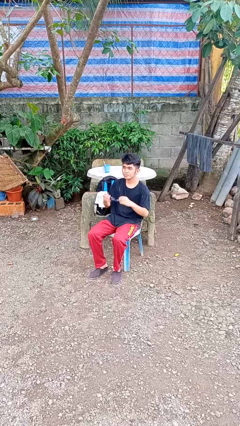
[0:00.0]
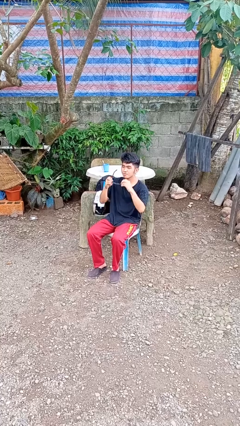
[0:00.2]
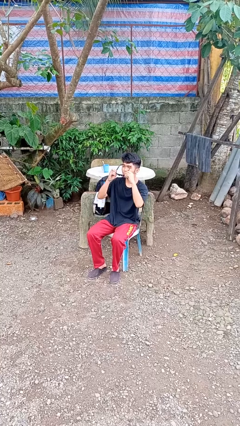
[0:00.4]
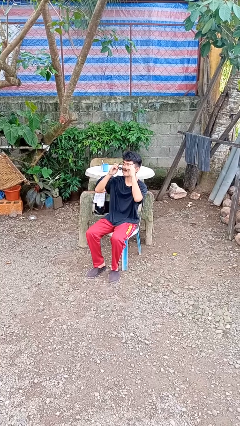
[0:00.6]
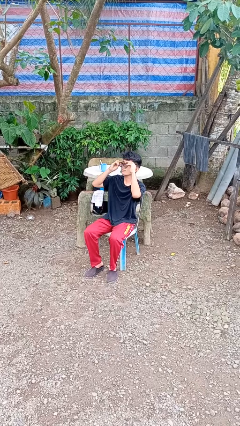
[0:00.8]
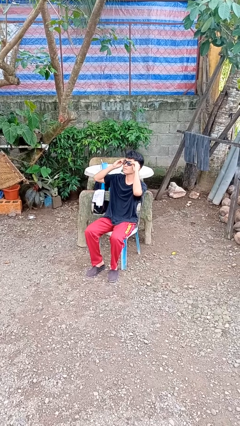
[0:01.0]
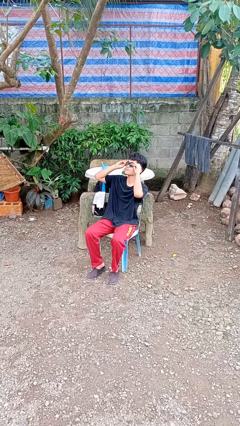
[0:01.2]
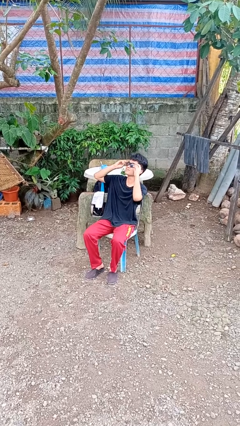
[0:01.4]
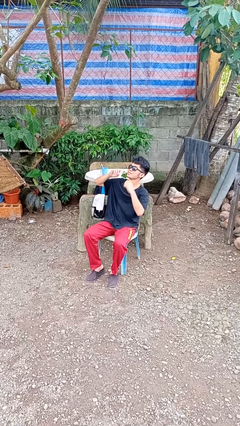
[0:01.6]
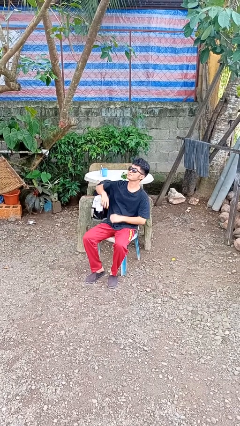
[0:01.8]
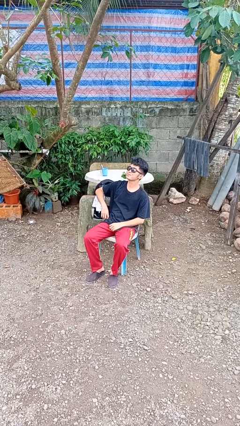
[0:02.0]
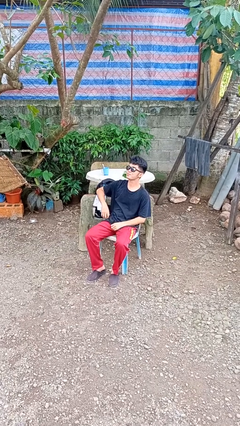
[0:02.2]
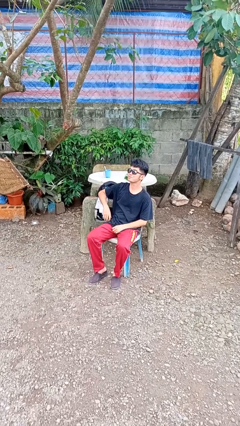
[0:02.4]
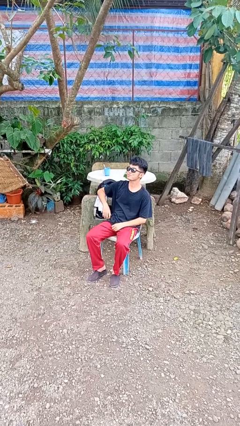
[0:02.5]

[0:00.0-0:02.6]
person puts on sunglasses

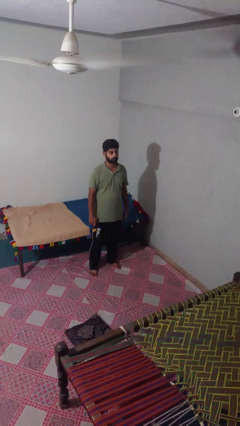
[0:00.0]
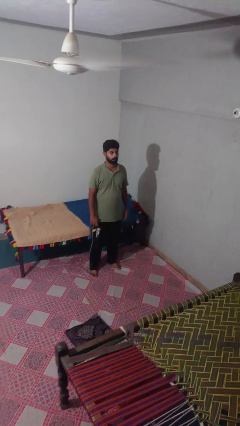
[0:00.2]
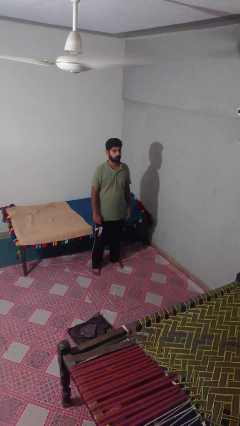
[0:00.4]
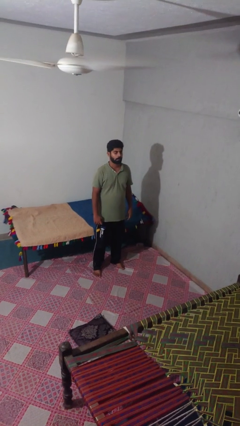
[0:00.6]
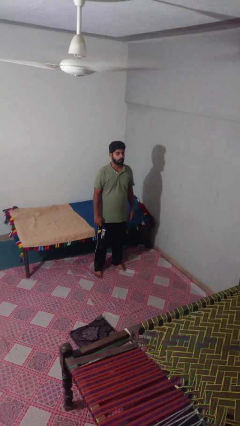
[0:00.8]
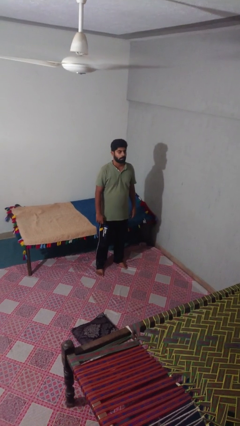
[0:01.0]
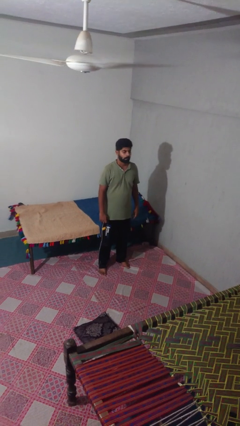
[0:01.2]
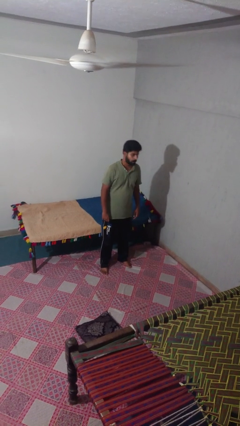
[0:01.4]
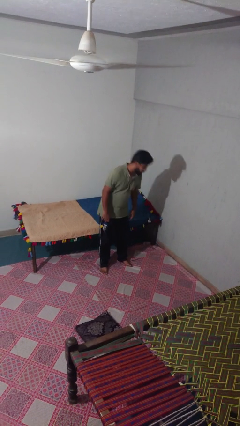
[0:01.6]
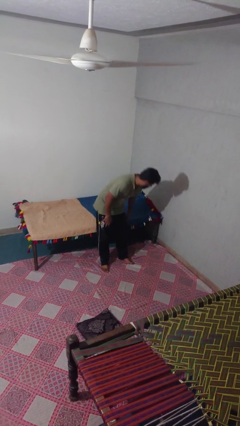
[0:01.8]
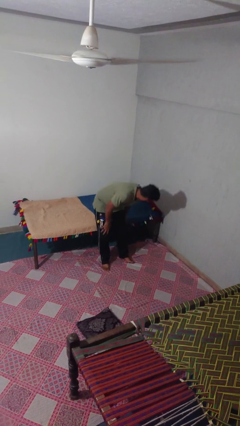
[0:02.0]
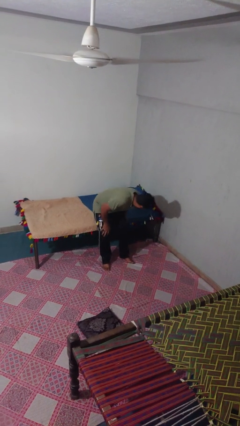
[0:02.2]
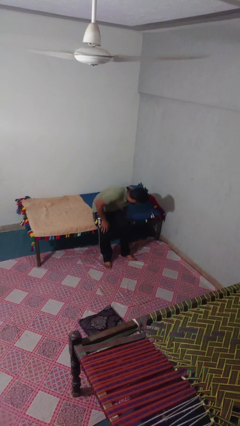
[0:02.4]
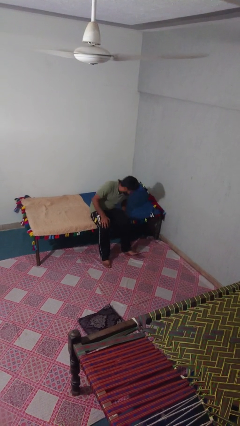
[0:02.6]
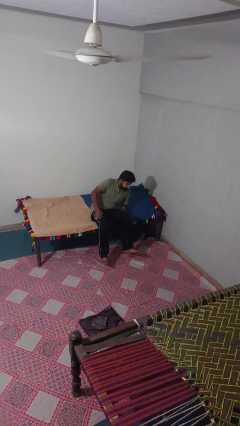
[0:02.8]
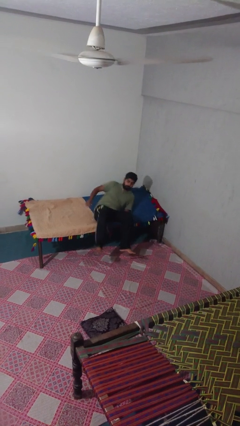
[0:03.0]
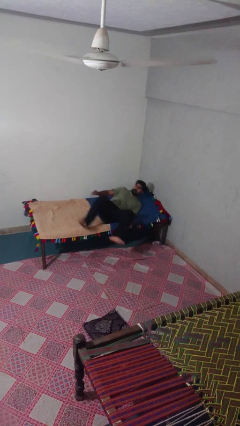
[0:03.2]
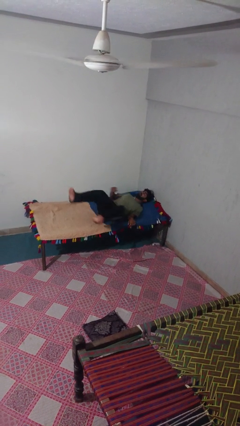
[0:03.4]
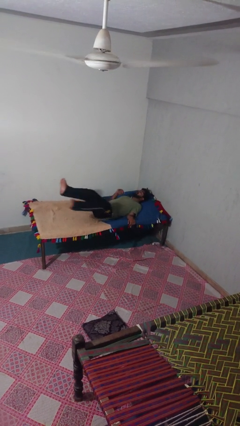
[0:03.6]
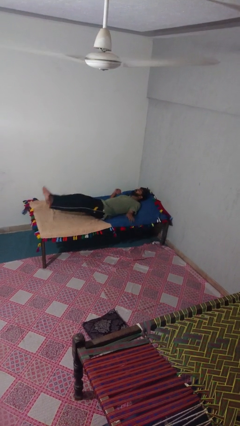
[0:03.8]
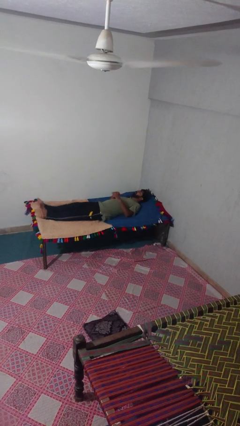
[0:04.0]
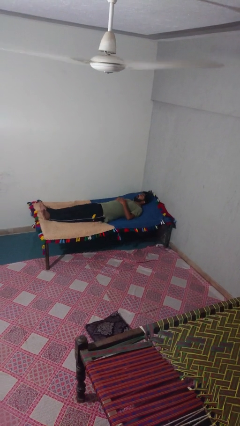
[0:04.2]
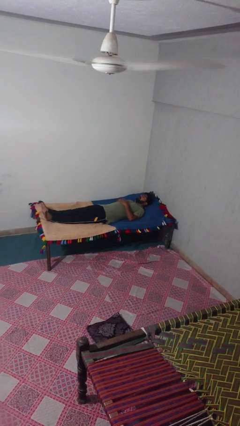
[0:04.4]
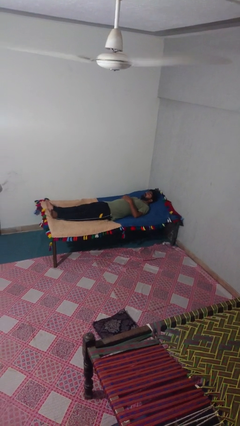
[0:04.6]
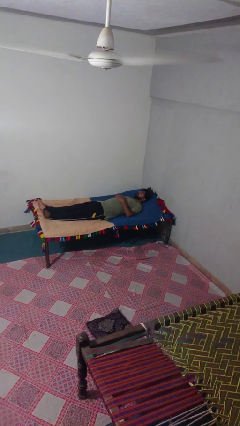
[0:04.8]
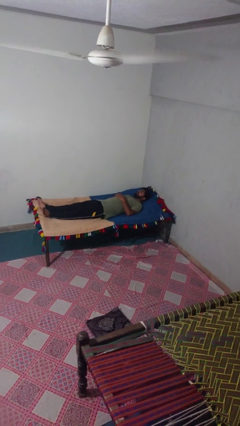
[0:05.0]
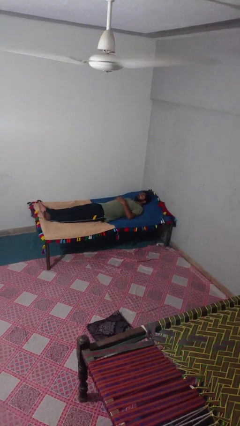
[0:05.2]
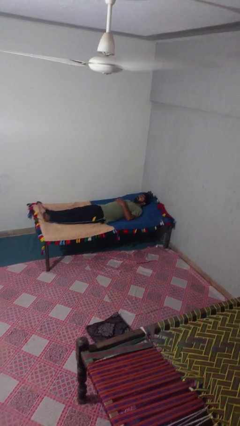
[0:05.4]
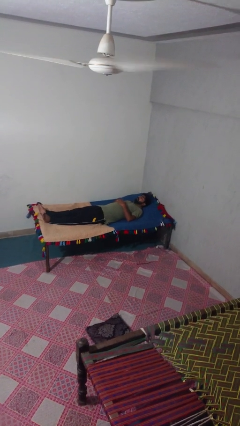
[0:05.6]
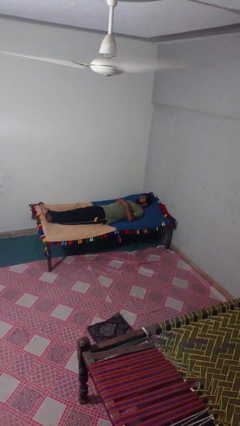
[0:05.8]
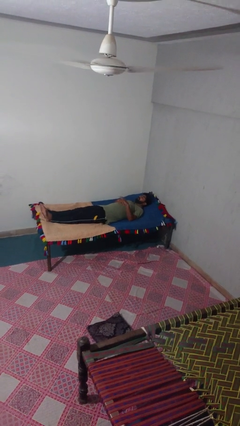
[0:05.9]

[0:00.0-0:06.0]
person lies down on bed

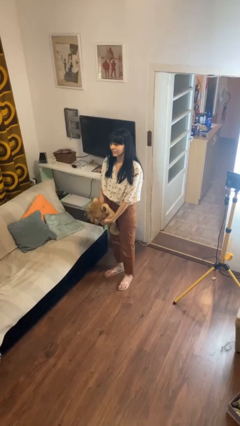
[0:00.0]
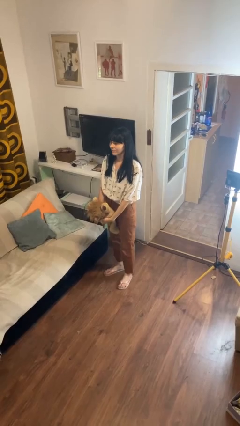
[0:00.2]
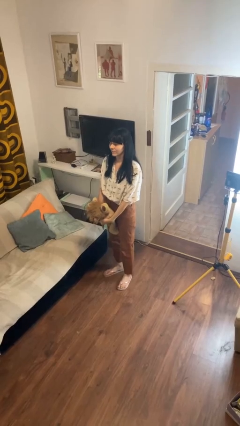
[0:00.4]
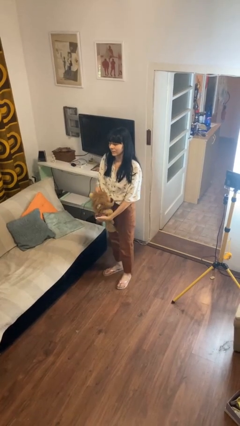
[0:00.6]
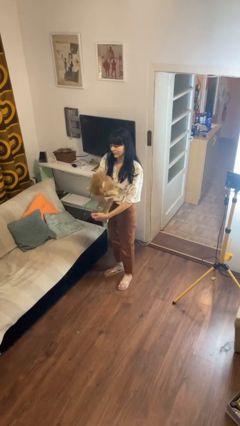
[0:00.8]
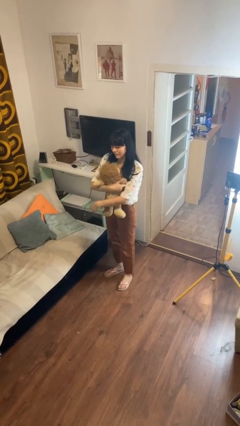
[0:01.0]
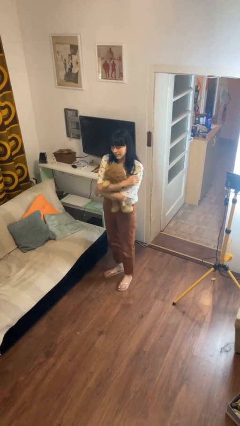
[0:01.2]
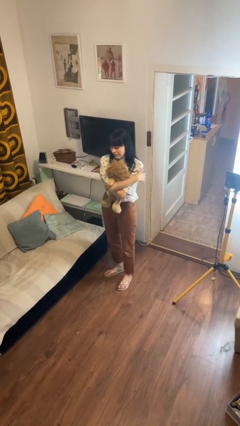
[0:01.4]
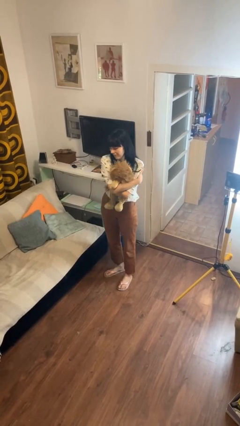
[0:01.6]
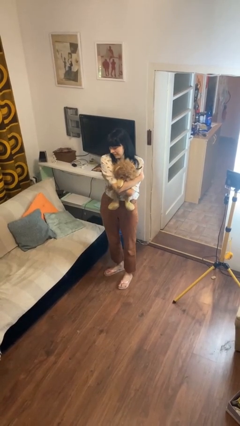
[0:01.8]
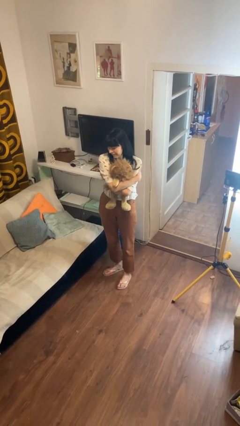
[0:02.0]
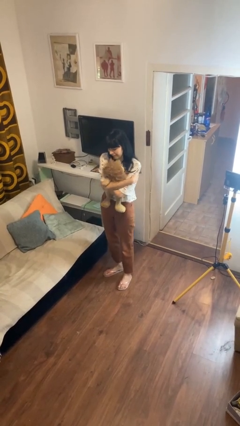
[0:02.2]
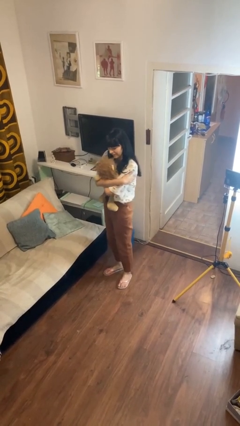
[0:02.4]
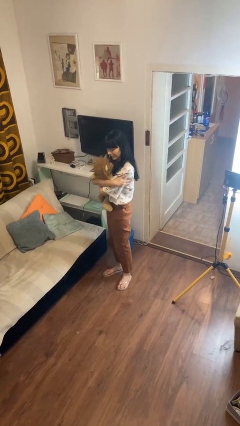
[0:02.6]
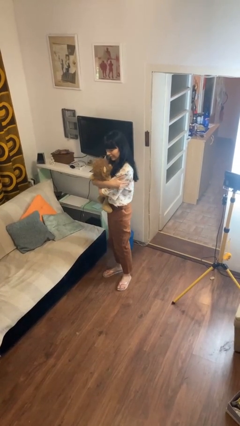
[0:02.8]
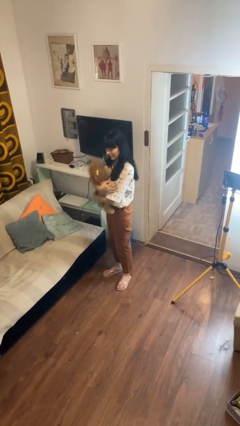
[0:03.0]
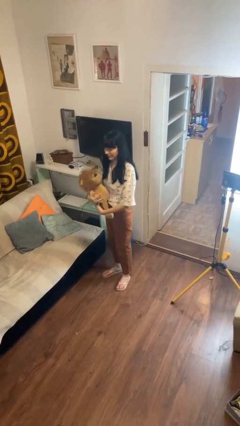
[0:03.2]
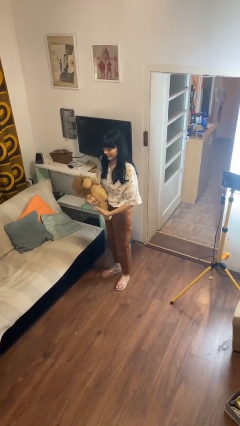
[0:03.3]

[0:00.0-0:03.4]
person hugs stuffed animal

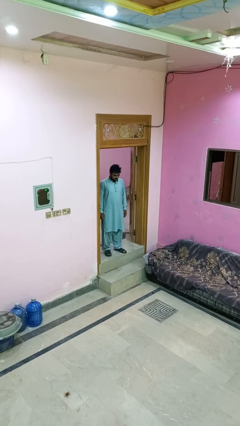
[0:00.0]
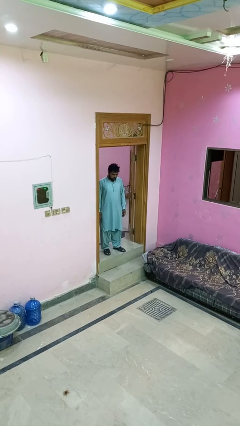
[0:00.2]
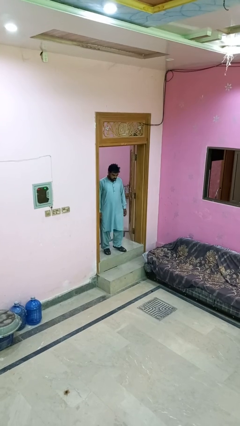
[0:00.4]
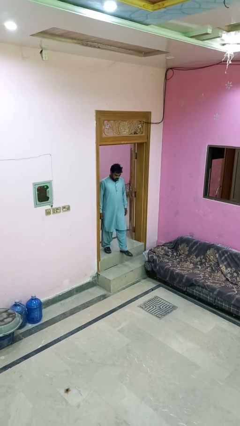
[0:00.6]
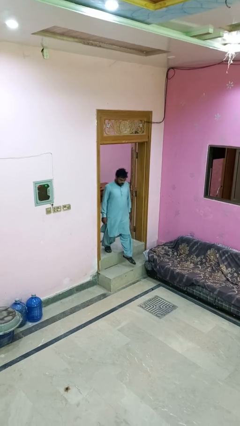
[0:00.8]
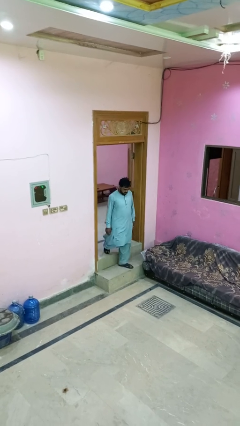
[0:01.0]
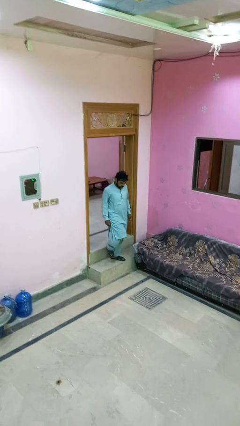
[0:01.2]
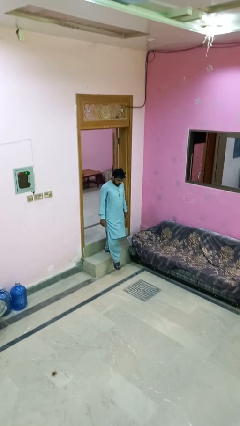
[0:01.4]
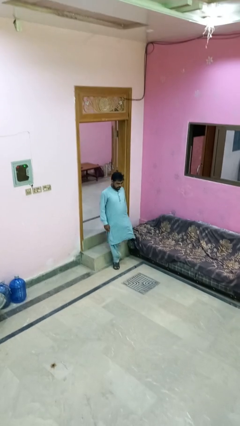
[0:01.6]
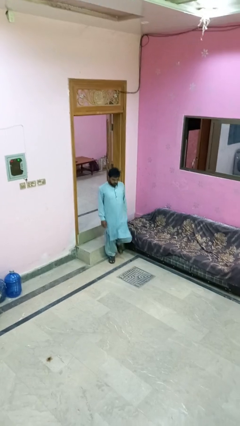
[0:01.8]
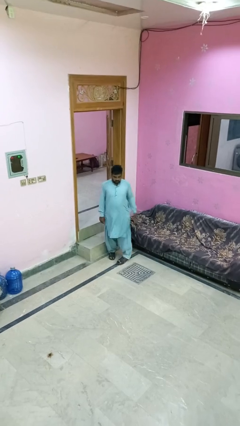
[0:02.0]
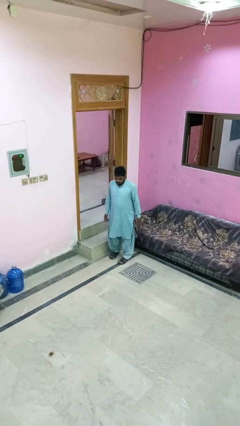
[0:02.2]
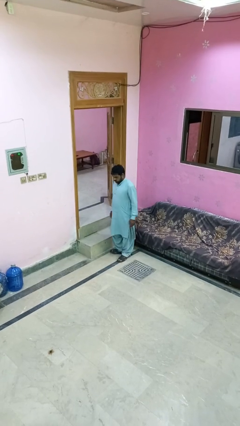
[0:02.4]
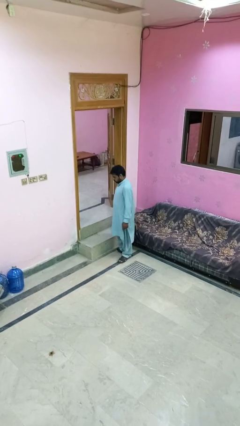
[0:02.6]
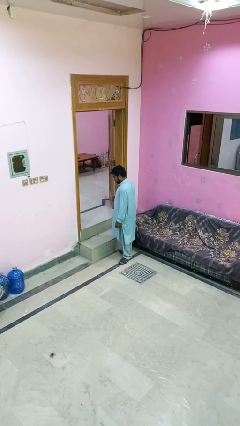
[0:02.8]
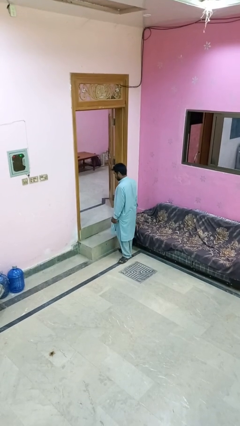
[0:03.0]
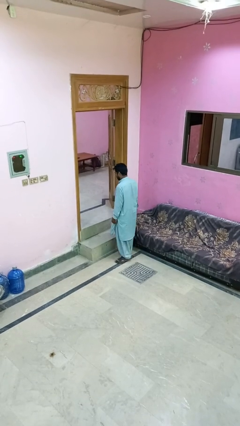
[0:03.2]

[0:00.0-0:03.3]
person climbs down stairs

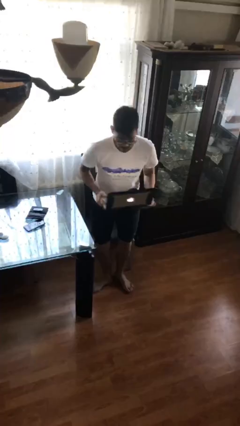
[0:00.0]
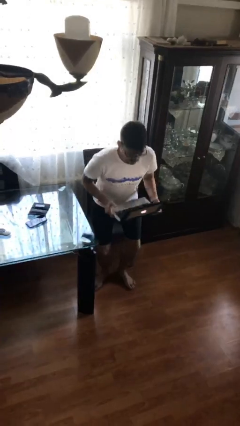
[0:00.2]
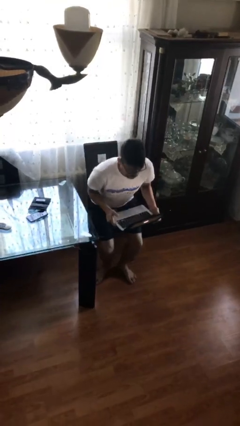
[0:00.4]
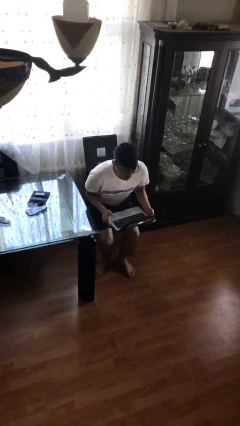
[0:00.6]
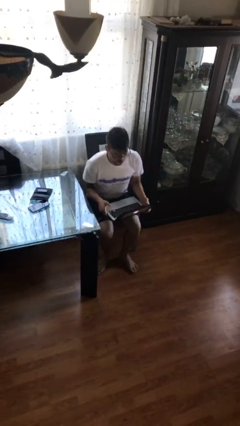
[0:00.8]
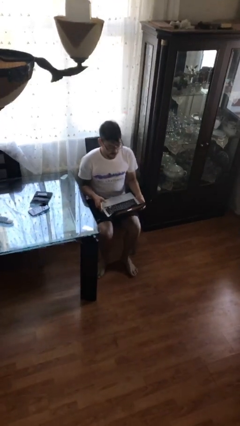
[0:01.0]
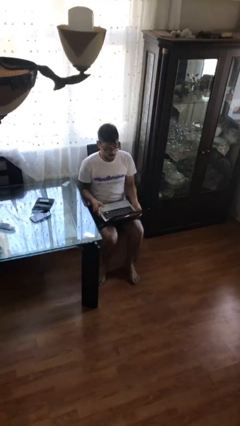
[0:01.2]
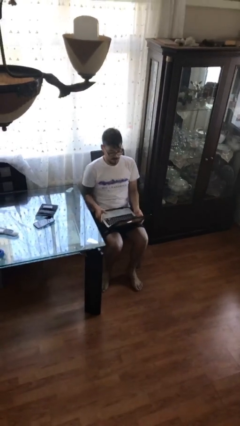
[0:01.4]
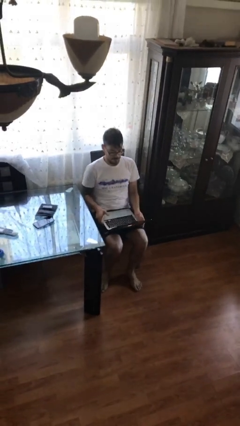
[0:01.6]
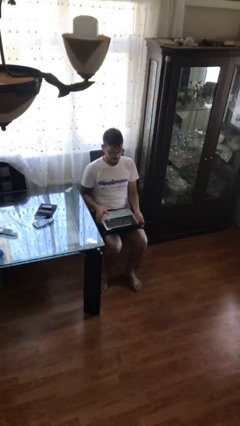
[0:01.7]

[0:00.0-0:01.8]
person sits down

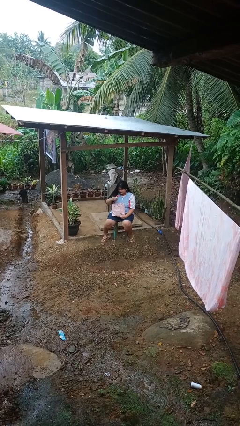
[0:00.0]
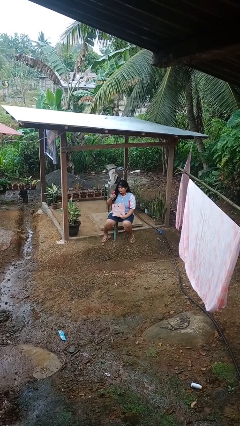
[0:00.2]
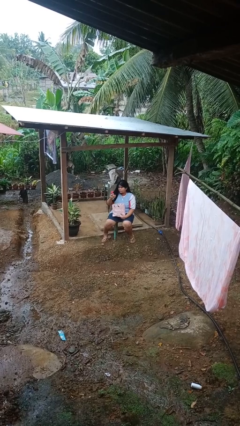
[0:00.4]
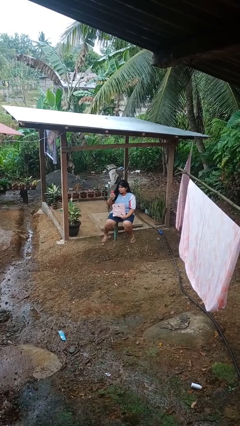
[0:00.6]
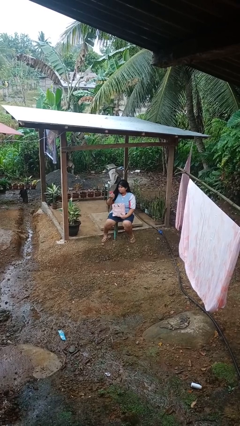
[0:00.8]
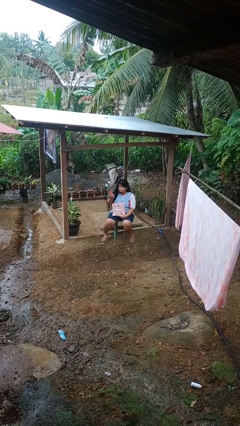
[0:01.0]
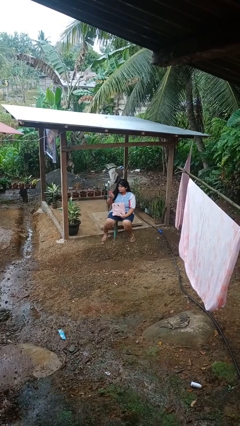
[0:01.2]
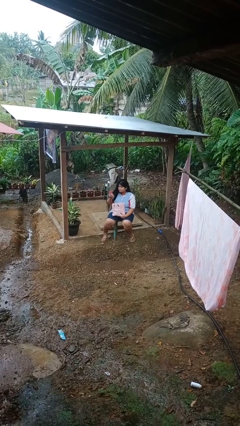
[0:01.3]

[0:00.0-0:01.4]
person takes object from bag
